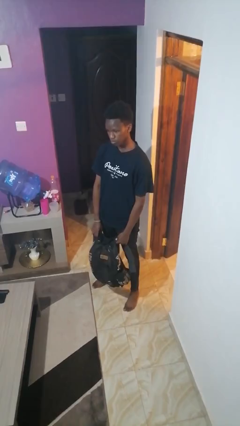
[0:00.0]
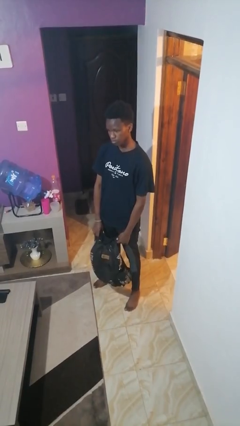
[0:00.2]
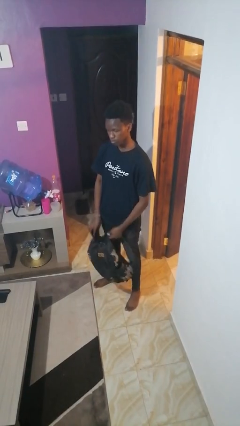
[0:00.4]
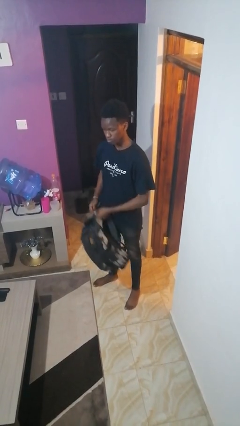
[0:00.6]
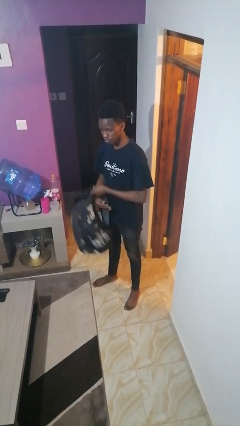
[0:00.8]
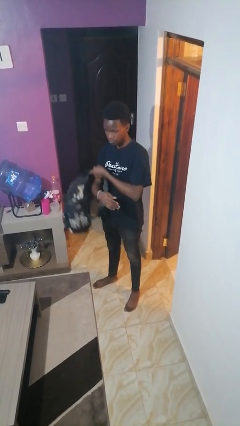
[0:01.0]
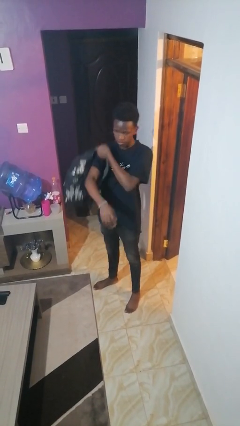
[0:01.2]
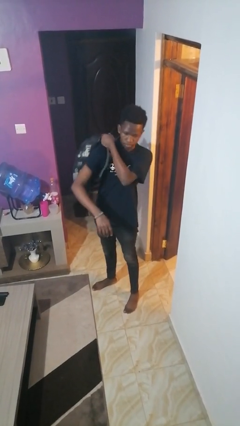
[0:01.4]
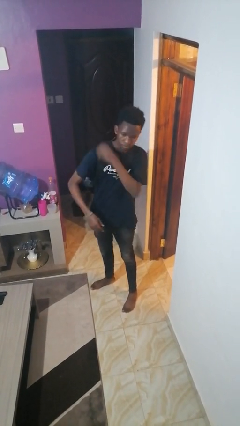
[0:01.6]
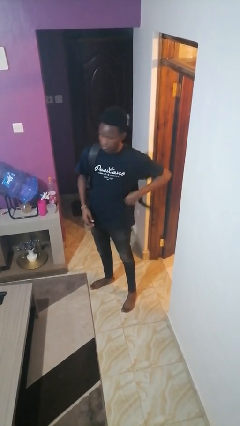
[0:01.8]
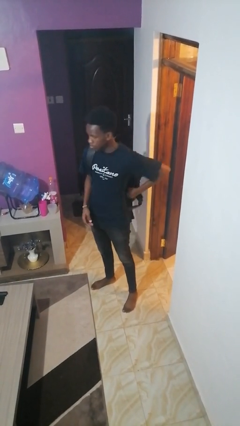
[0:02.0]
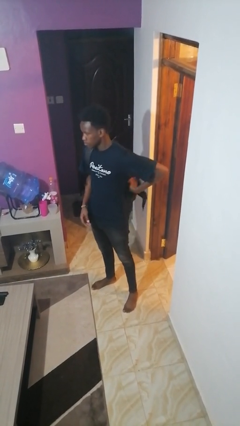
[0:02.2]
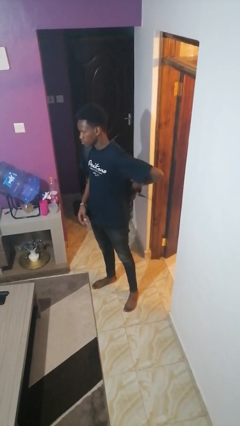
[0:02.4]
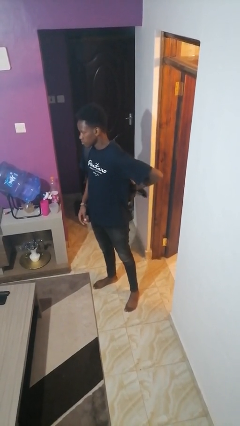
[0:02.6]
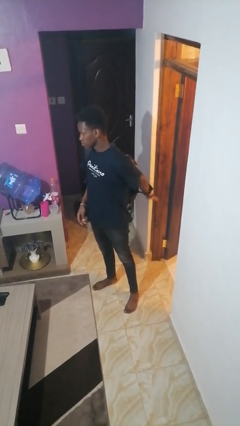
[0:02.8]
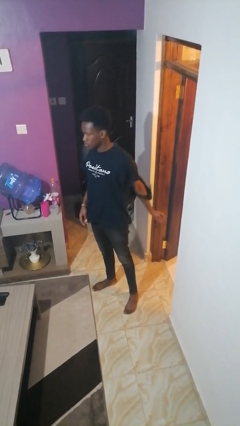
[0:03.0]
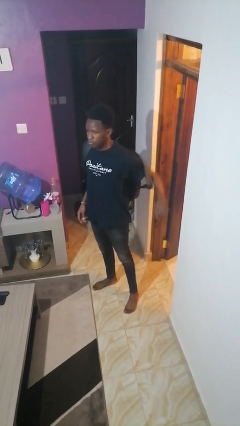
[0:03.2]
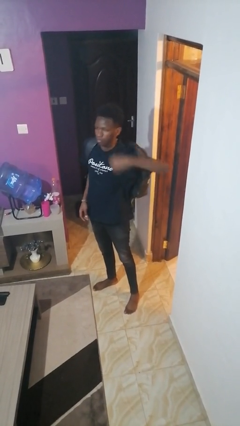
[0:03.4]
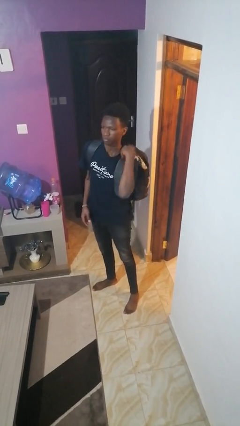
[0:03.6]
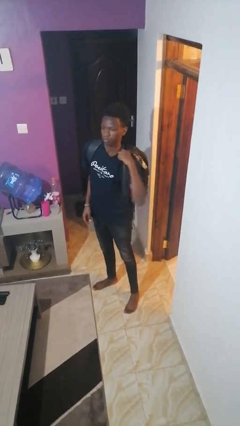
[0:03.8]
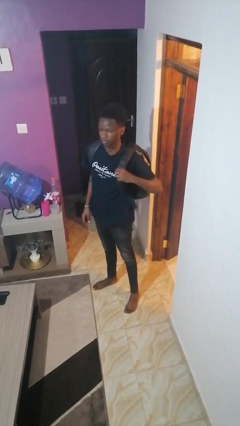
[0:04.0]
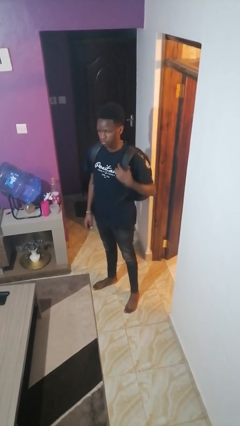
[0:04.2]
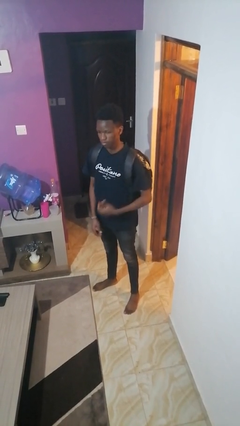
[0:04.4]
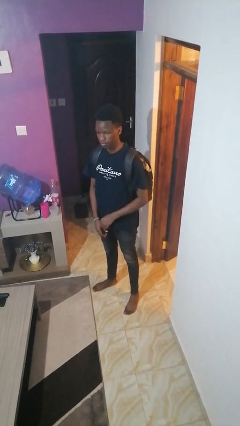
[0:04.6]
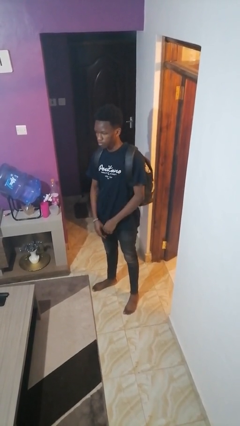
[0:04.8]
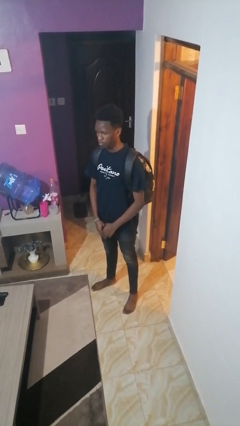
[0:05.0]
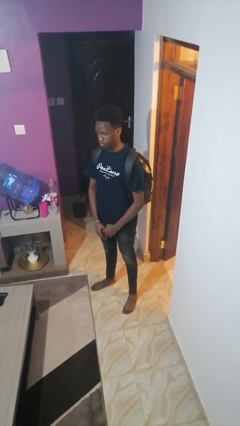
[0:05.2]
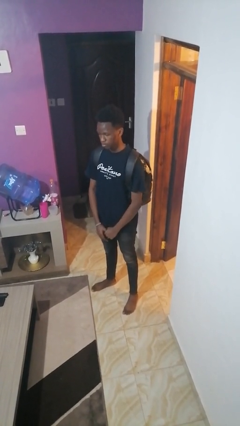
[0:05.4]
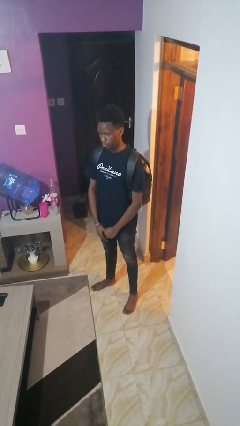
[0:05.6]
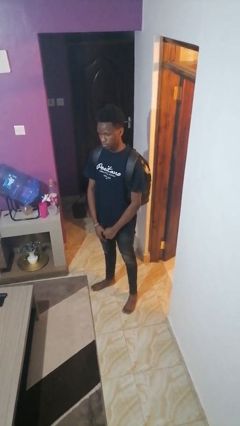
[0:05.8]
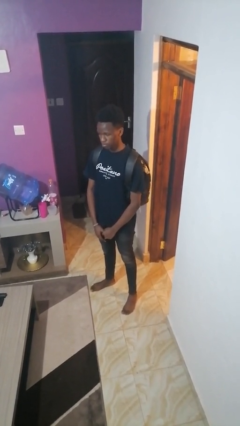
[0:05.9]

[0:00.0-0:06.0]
person puts on backpack

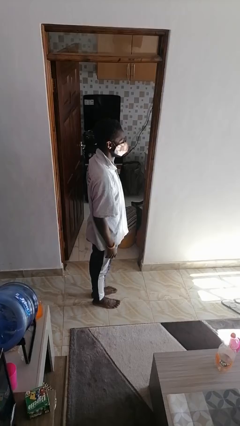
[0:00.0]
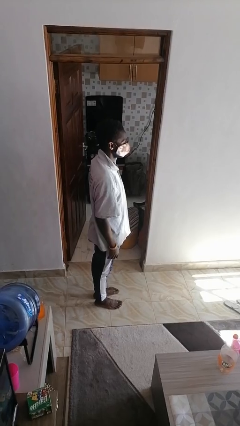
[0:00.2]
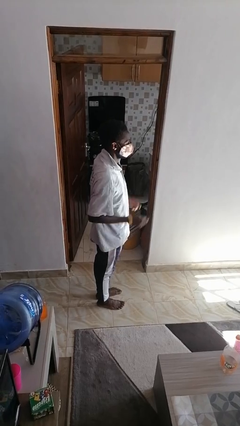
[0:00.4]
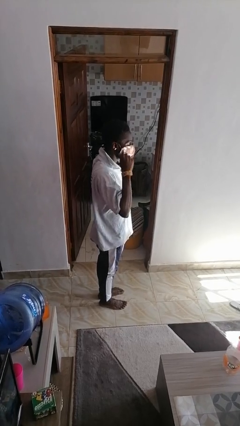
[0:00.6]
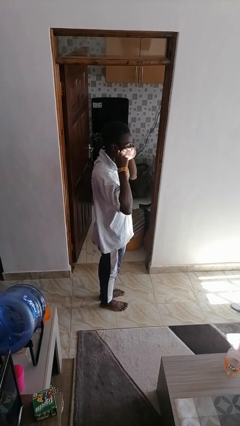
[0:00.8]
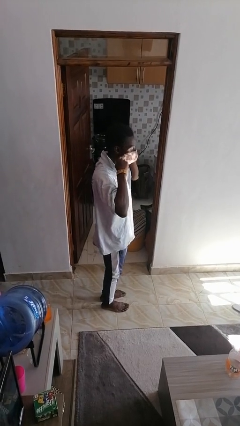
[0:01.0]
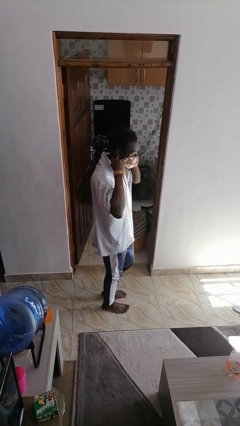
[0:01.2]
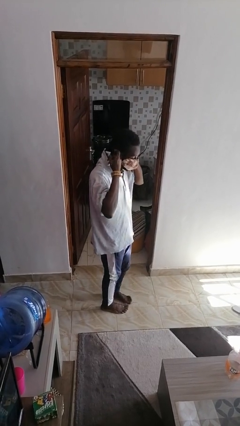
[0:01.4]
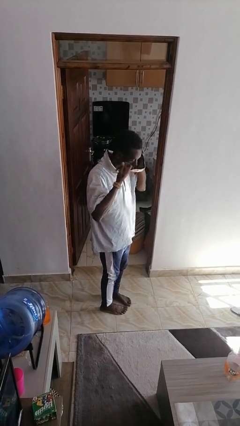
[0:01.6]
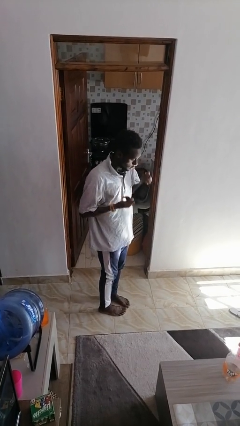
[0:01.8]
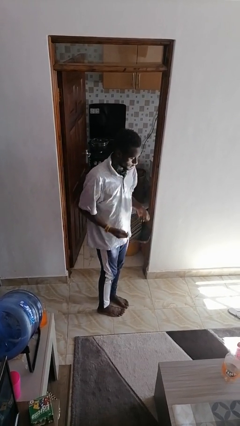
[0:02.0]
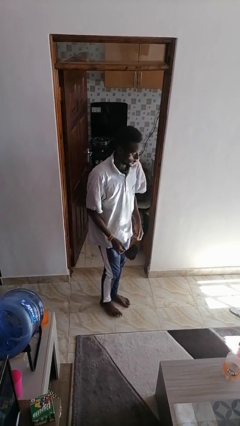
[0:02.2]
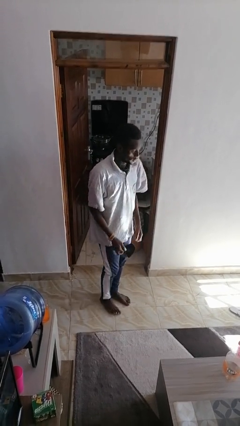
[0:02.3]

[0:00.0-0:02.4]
person takes off facemask

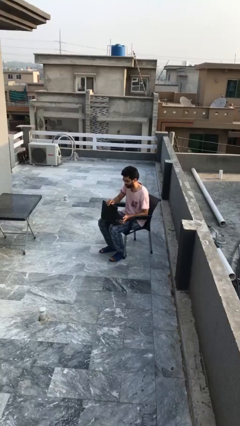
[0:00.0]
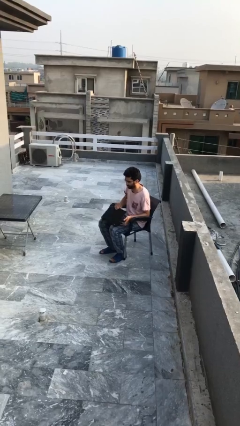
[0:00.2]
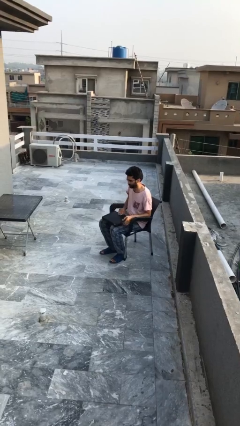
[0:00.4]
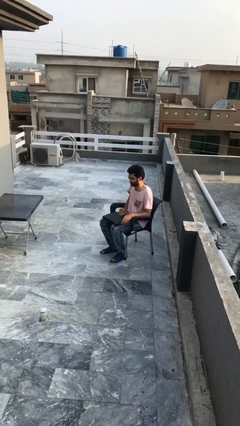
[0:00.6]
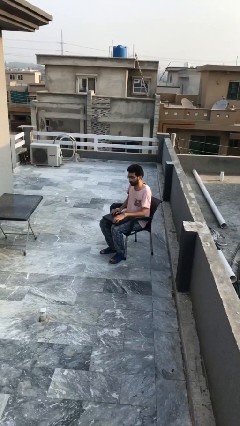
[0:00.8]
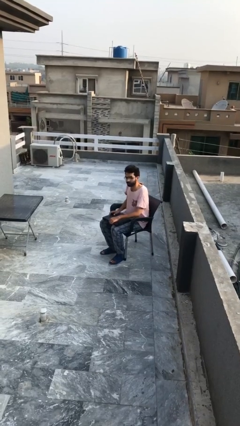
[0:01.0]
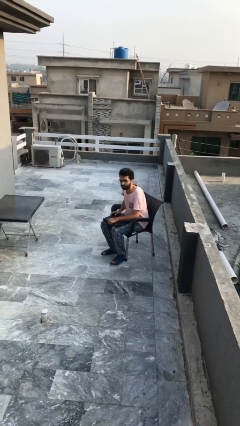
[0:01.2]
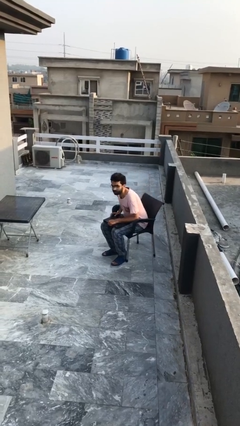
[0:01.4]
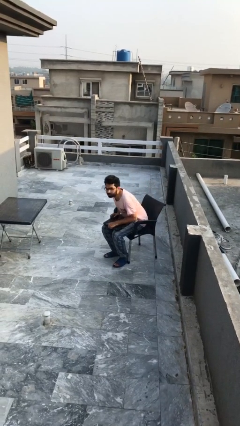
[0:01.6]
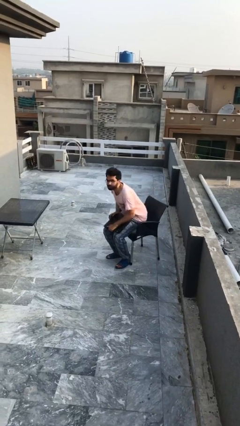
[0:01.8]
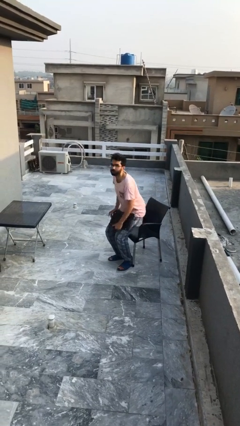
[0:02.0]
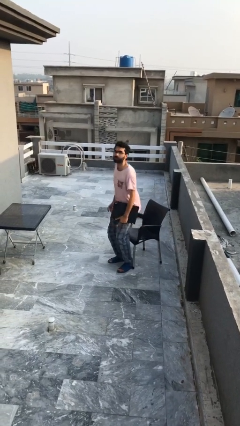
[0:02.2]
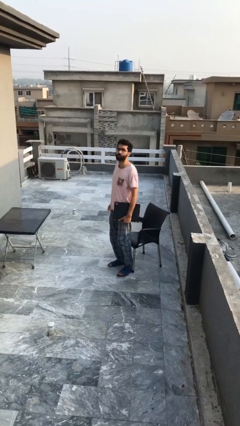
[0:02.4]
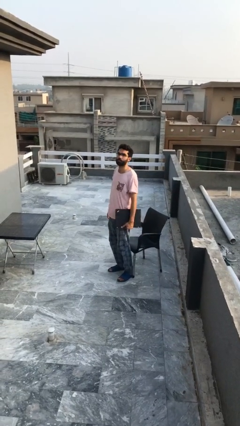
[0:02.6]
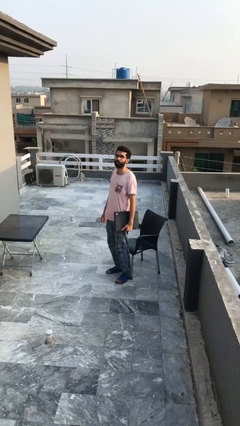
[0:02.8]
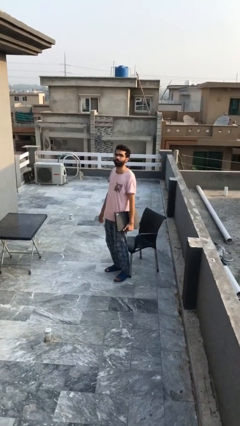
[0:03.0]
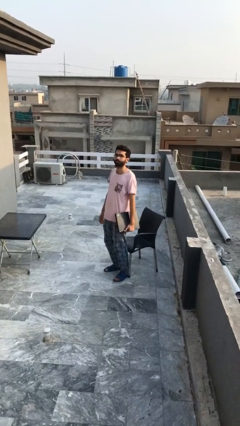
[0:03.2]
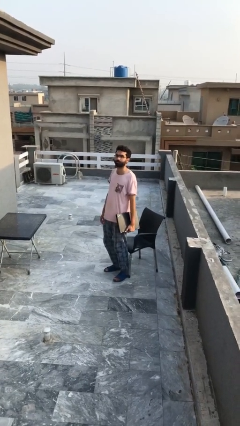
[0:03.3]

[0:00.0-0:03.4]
person stands up

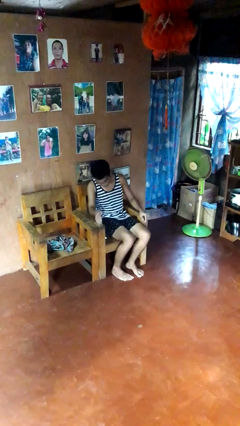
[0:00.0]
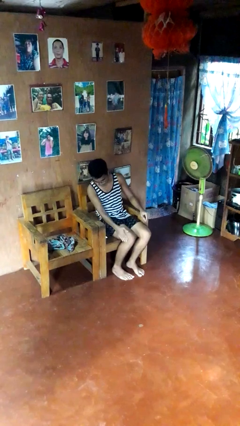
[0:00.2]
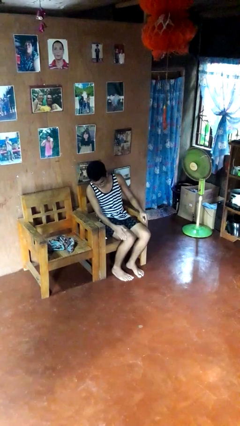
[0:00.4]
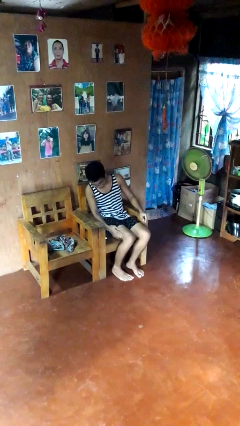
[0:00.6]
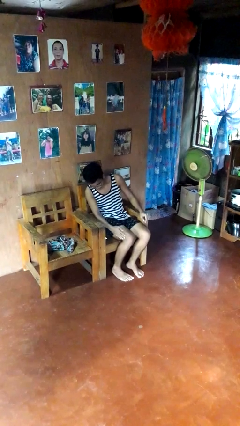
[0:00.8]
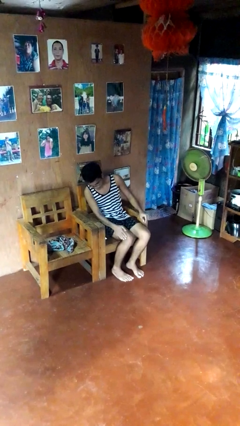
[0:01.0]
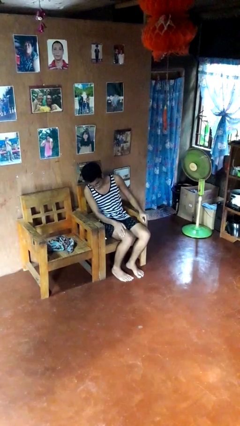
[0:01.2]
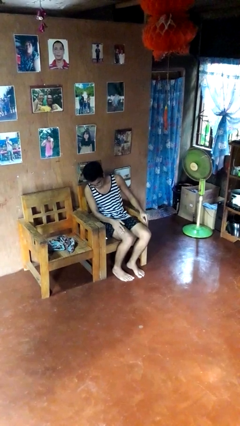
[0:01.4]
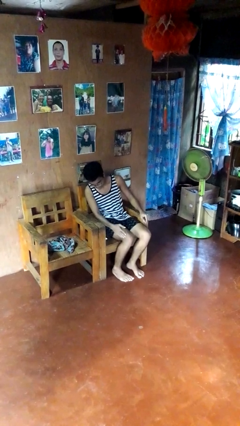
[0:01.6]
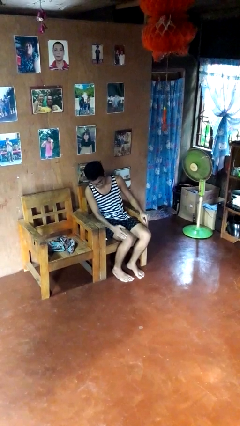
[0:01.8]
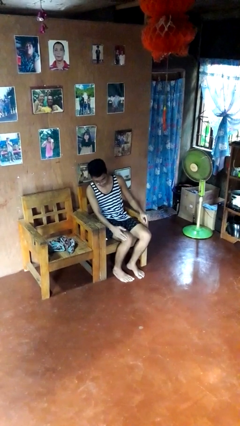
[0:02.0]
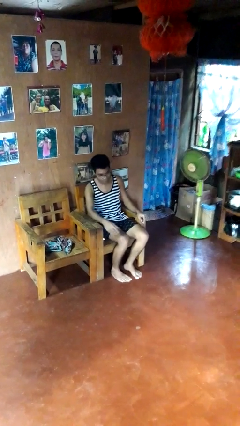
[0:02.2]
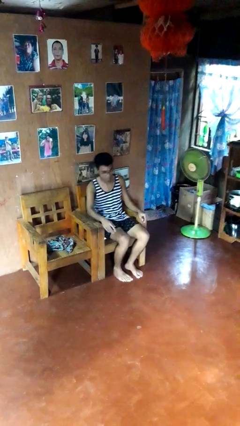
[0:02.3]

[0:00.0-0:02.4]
person swats bug

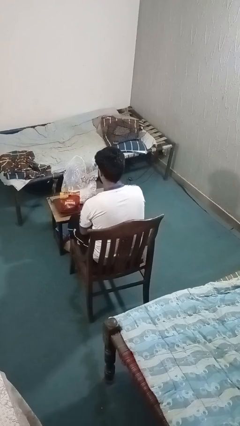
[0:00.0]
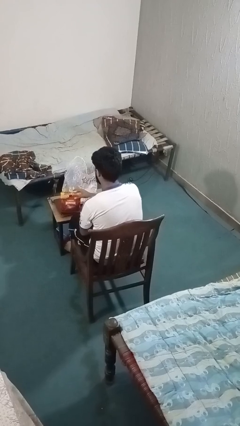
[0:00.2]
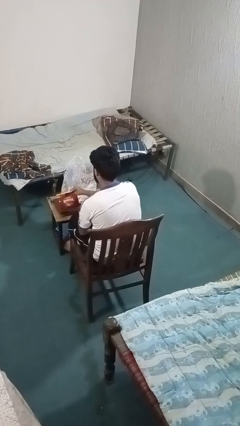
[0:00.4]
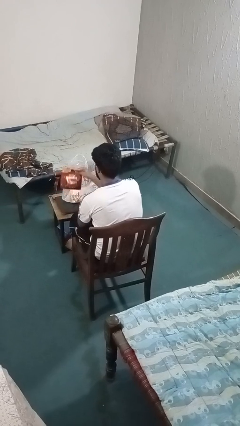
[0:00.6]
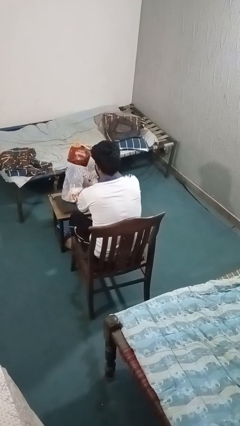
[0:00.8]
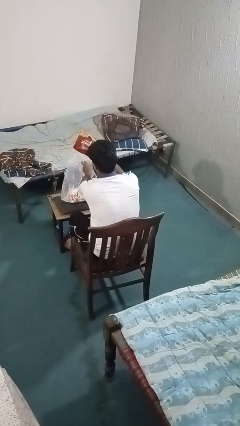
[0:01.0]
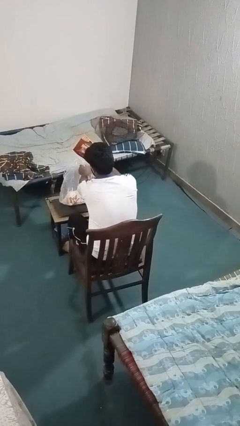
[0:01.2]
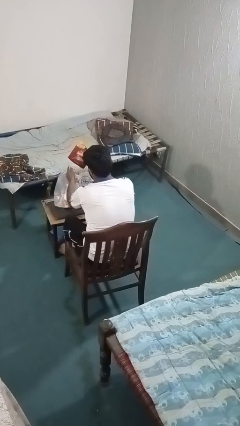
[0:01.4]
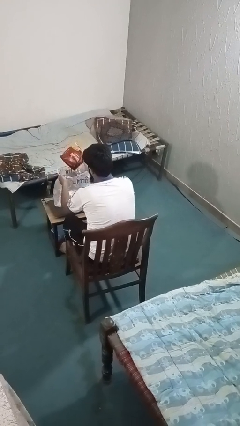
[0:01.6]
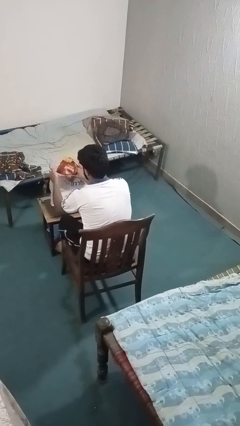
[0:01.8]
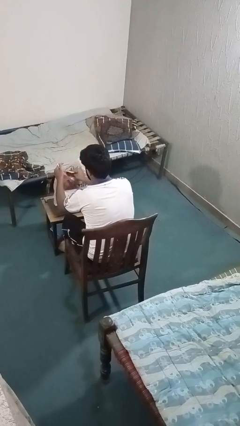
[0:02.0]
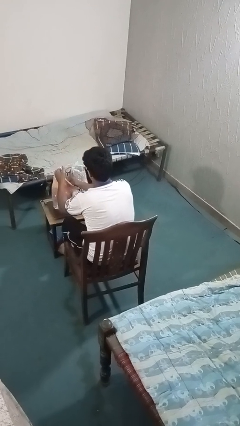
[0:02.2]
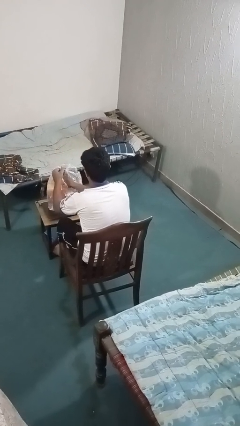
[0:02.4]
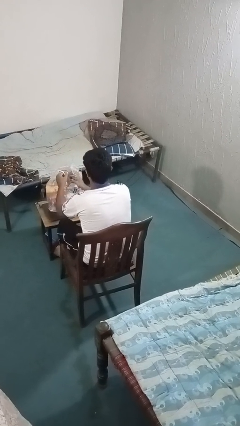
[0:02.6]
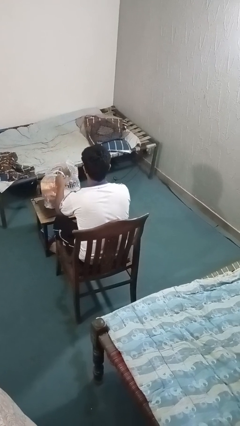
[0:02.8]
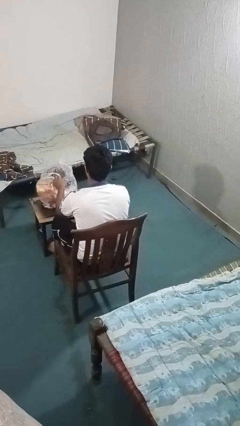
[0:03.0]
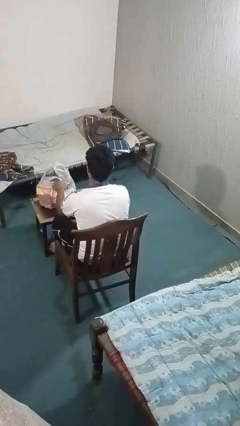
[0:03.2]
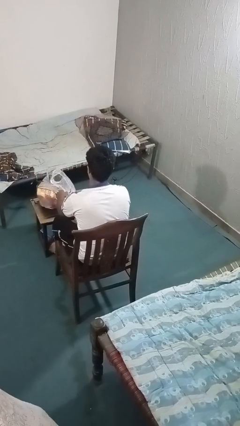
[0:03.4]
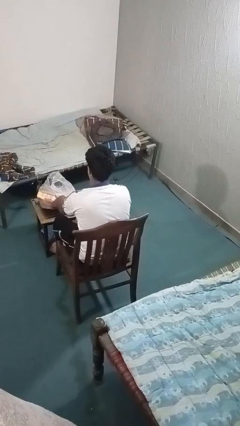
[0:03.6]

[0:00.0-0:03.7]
person puts object into bag

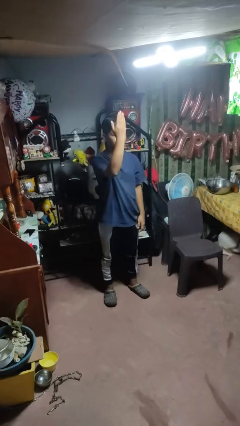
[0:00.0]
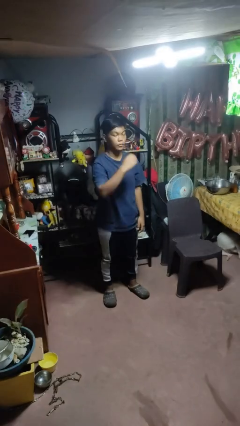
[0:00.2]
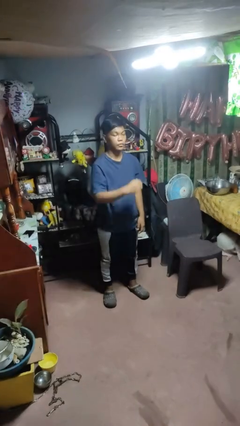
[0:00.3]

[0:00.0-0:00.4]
person gestures swipe up
